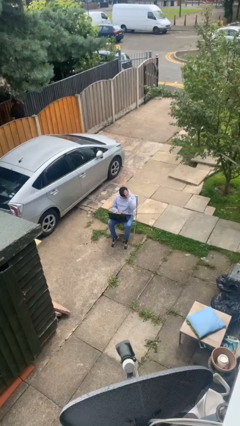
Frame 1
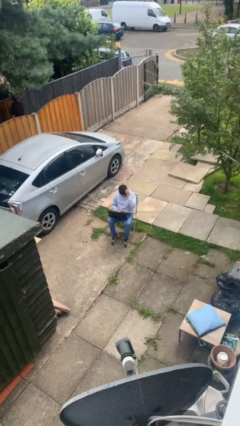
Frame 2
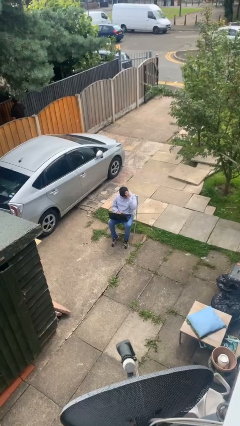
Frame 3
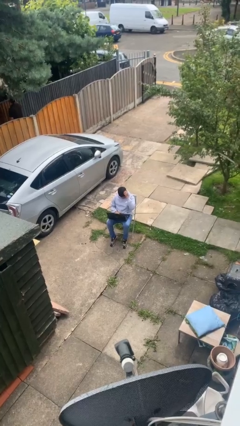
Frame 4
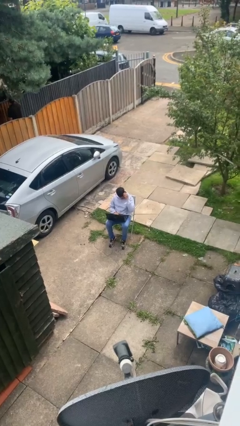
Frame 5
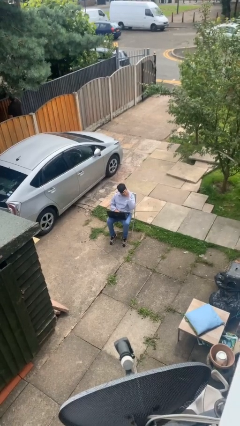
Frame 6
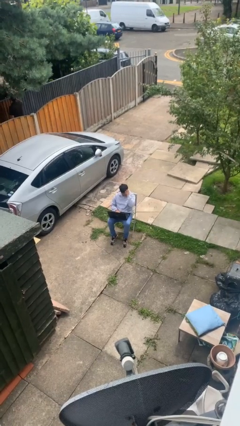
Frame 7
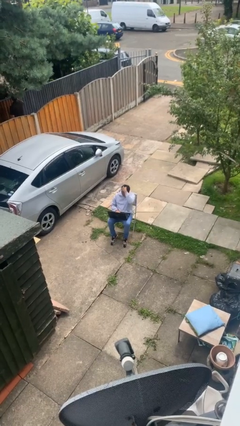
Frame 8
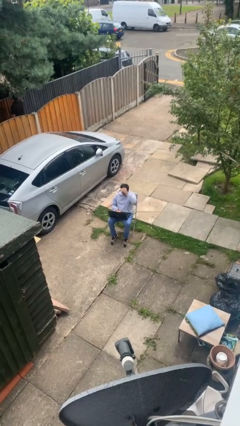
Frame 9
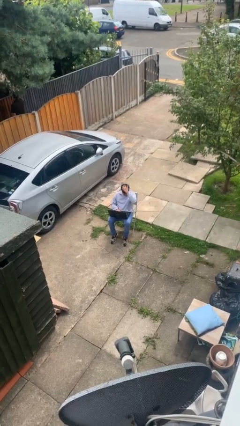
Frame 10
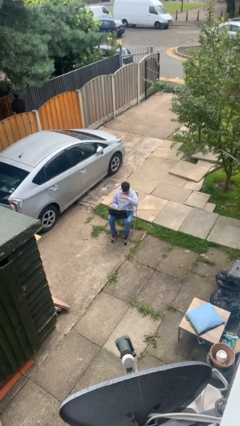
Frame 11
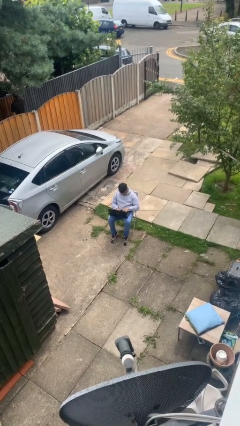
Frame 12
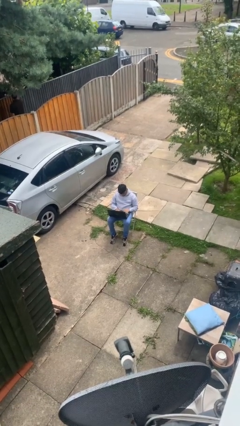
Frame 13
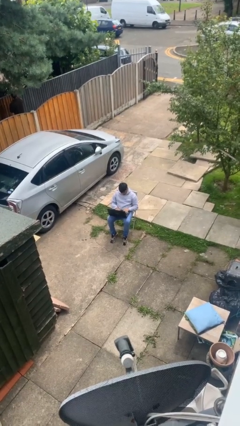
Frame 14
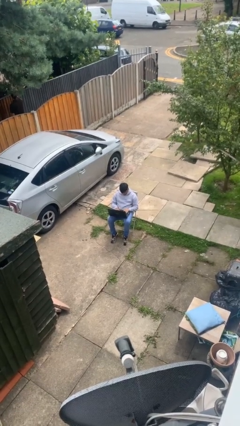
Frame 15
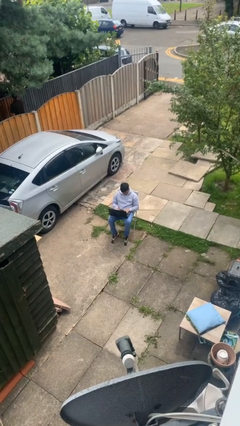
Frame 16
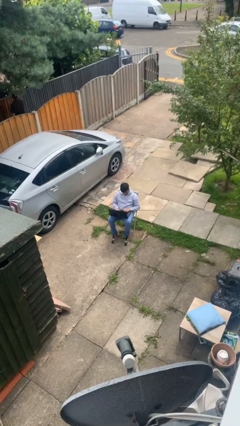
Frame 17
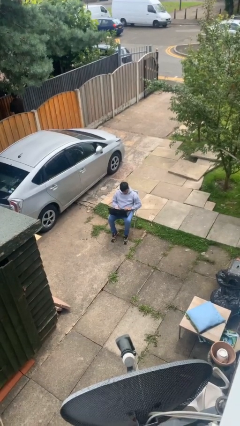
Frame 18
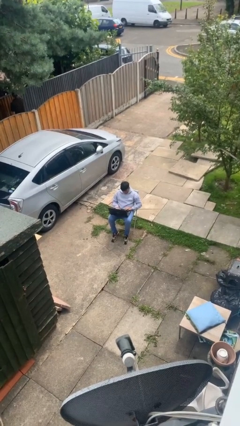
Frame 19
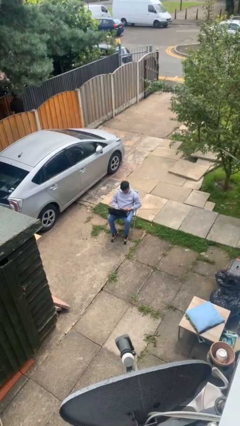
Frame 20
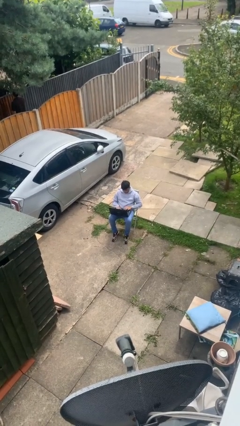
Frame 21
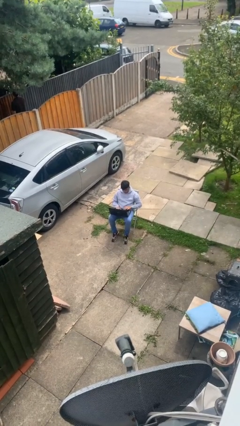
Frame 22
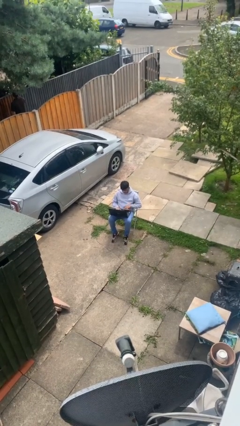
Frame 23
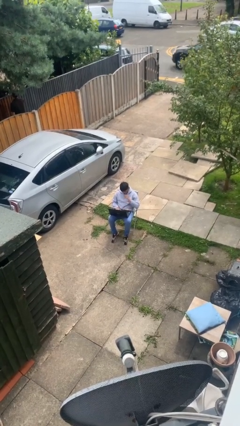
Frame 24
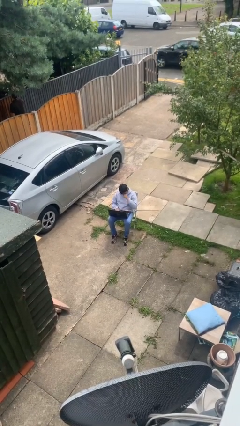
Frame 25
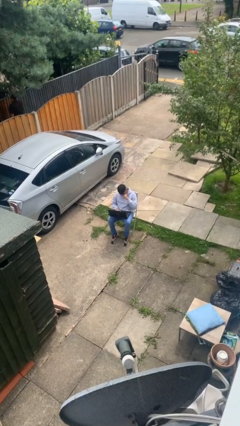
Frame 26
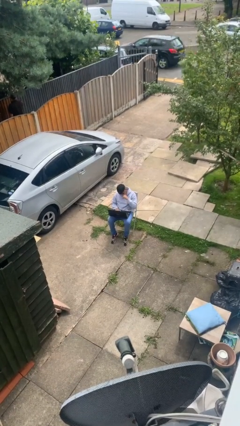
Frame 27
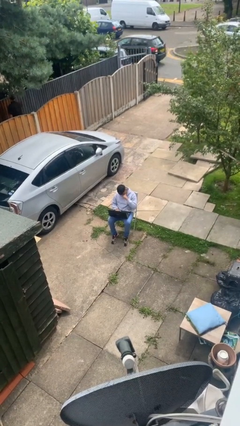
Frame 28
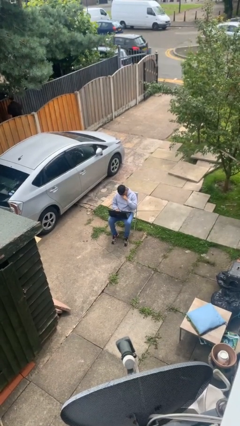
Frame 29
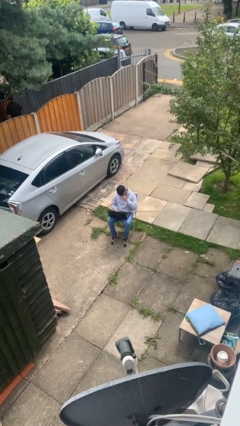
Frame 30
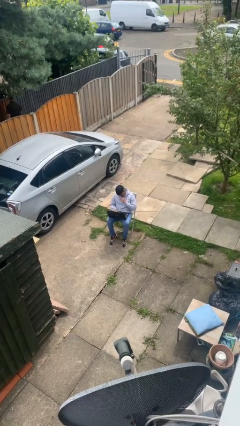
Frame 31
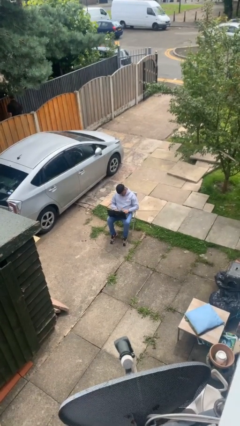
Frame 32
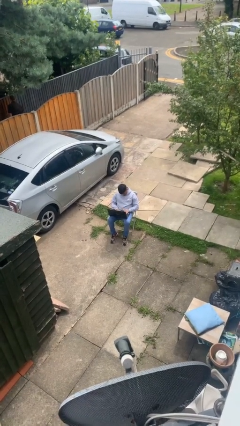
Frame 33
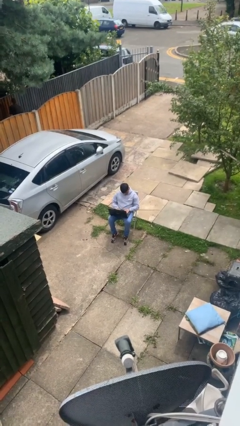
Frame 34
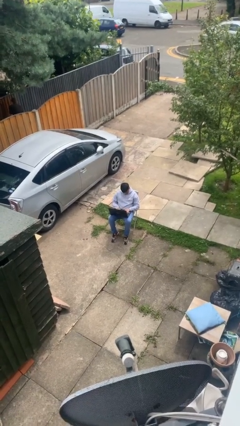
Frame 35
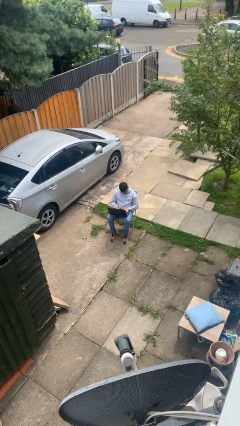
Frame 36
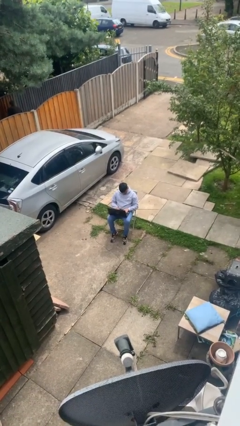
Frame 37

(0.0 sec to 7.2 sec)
person interacts with laptop

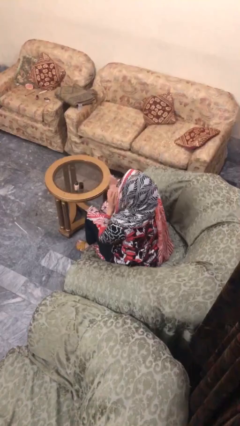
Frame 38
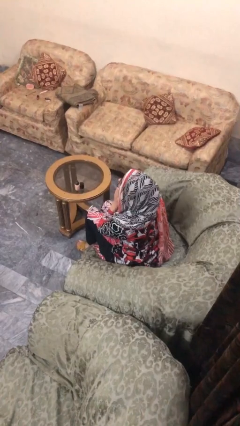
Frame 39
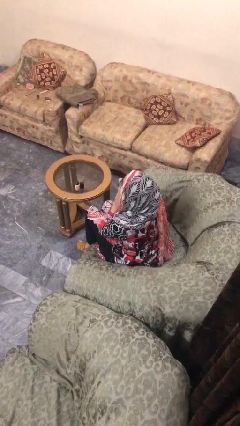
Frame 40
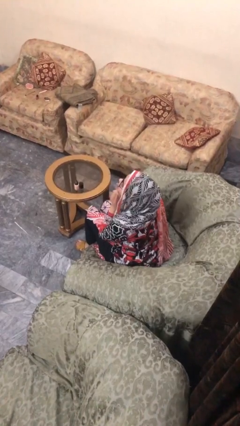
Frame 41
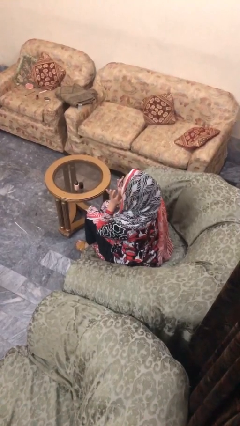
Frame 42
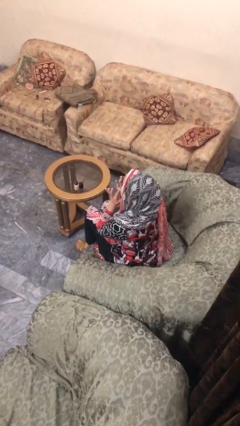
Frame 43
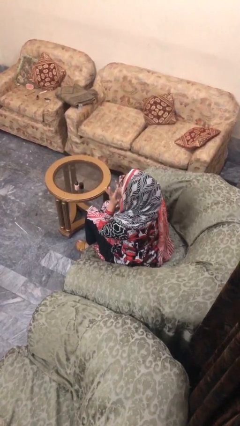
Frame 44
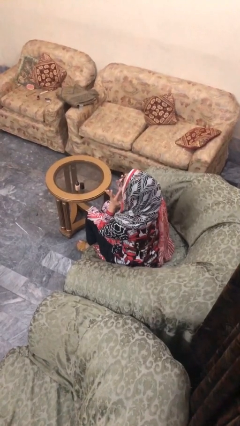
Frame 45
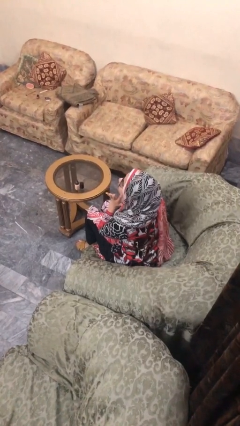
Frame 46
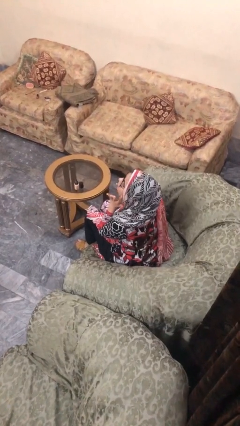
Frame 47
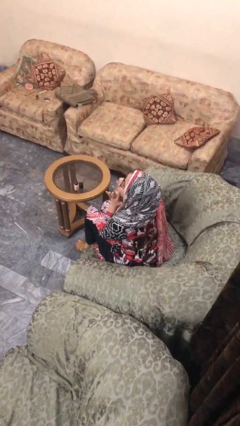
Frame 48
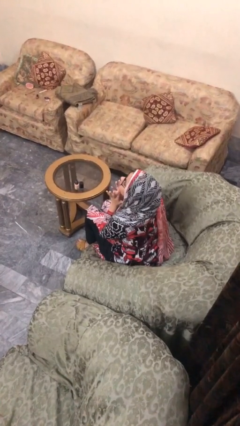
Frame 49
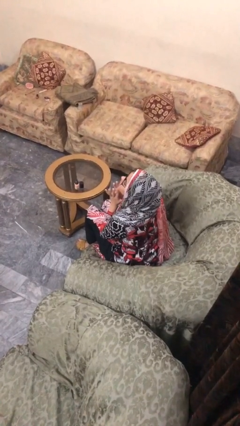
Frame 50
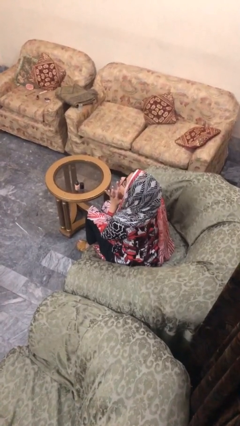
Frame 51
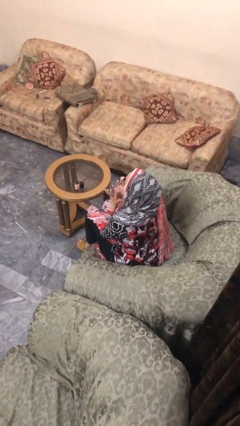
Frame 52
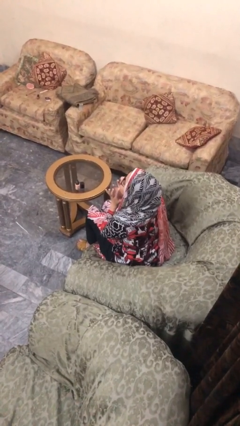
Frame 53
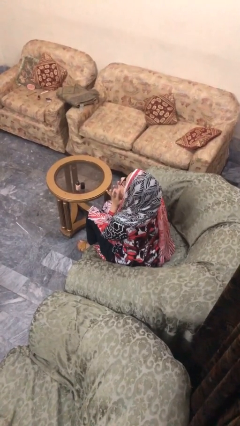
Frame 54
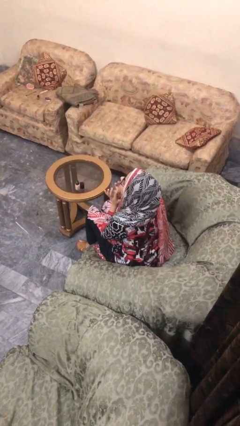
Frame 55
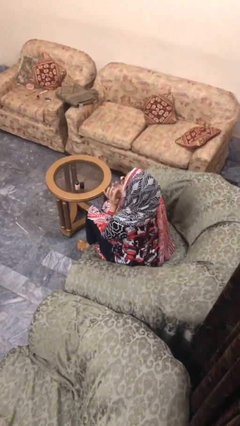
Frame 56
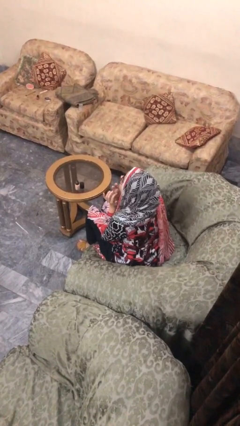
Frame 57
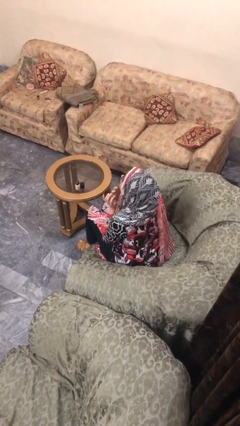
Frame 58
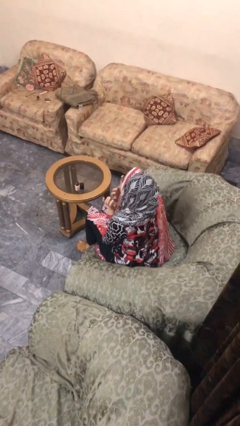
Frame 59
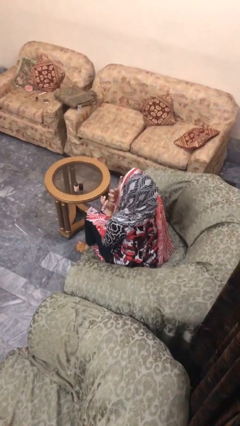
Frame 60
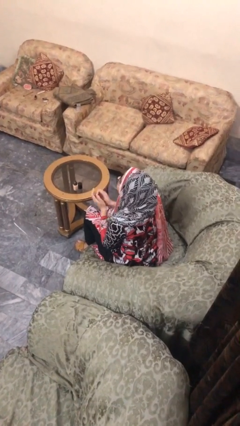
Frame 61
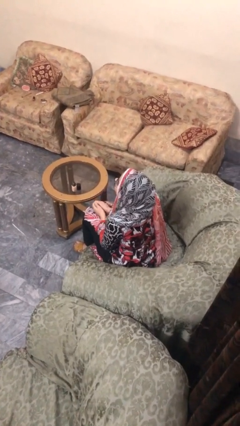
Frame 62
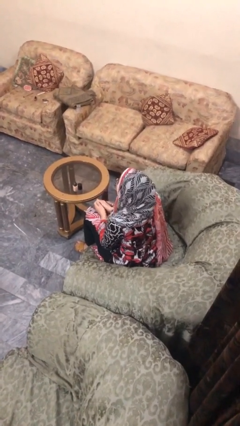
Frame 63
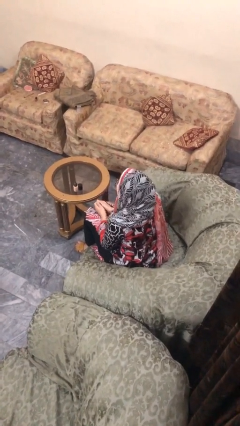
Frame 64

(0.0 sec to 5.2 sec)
person applies foundation makeup

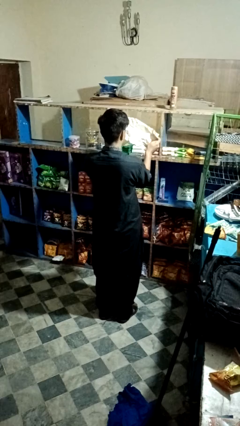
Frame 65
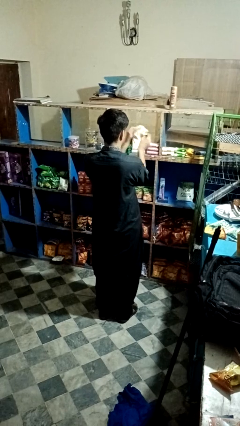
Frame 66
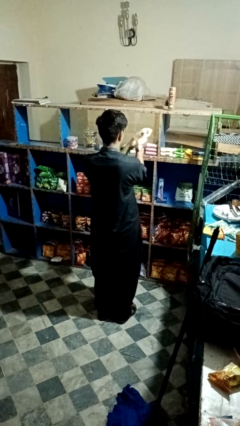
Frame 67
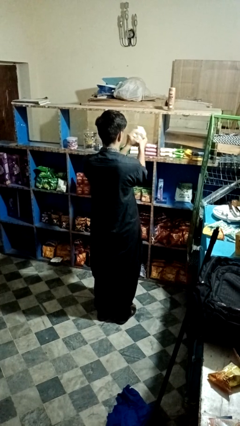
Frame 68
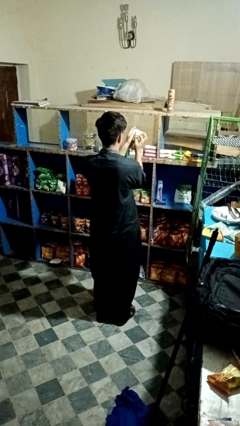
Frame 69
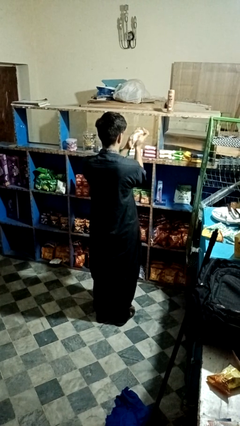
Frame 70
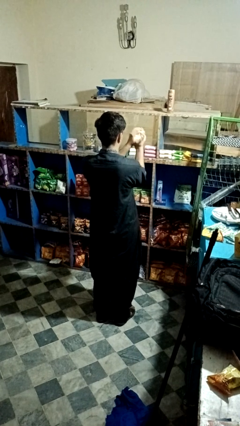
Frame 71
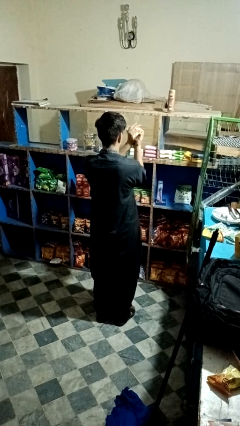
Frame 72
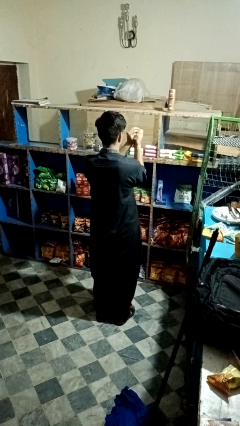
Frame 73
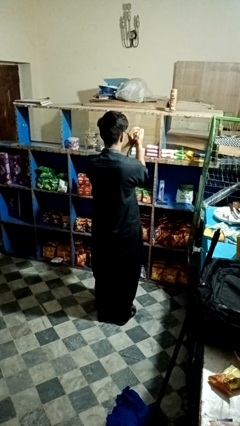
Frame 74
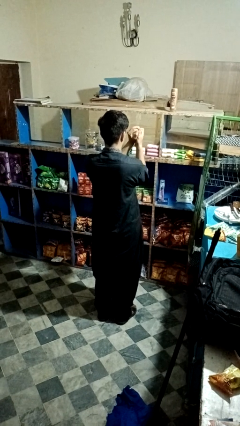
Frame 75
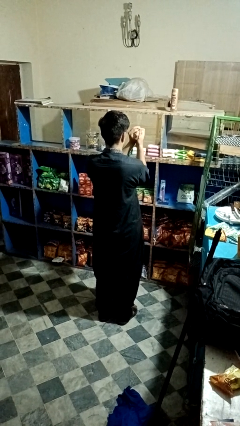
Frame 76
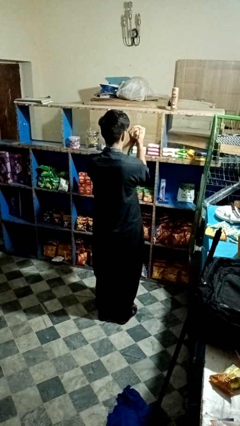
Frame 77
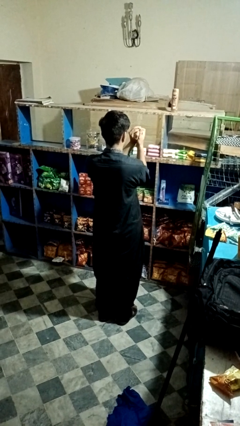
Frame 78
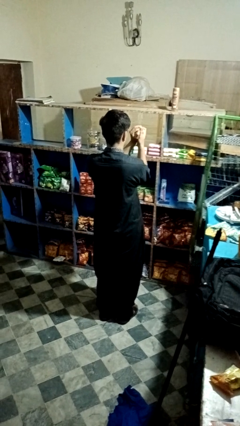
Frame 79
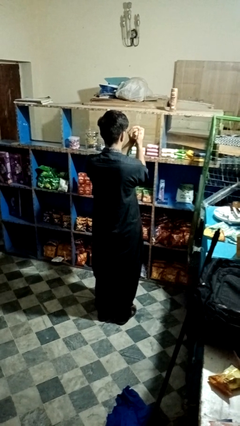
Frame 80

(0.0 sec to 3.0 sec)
person crumples paper

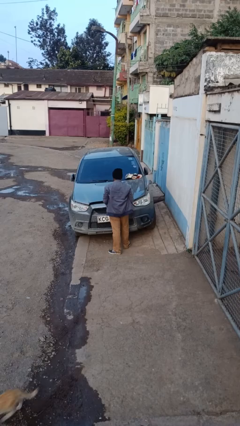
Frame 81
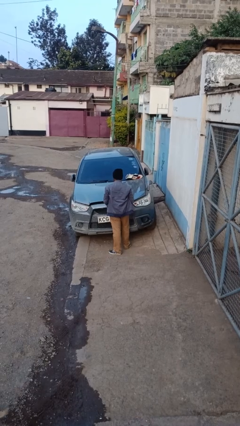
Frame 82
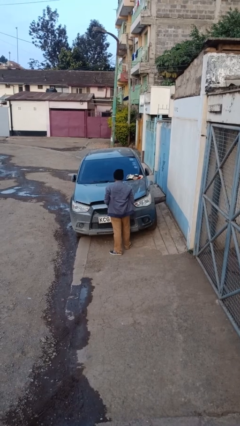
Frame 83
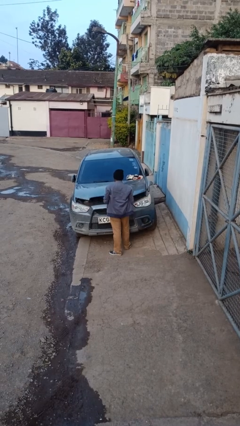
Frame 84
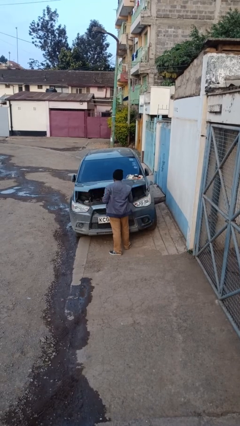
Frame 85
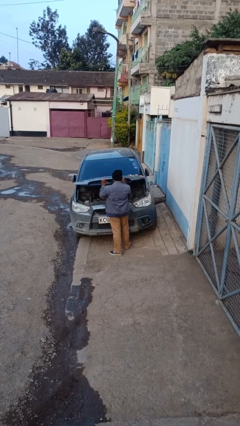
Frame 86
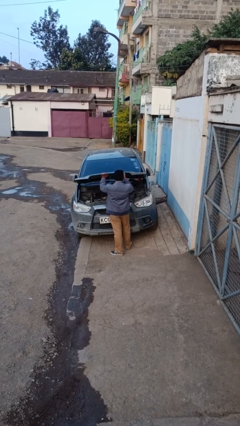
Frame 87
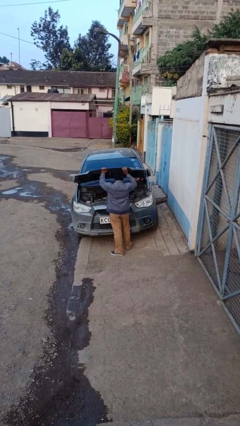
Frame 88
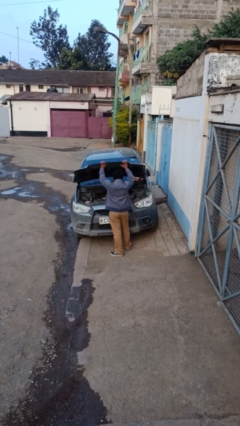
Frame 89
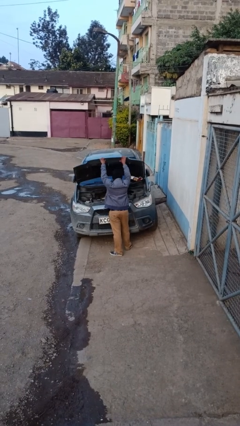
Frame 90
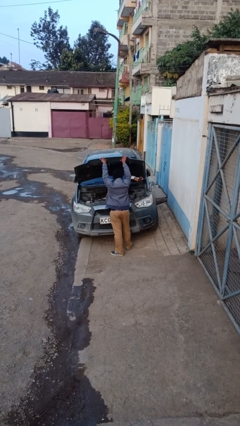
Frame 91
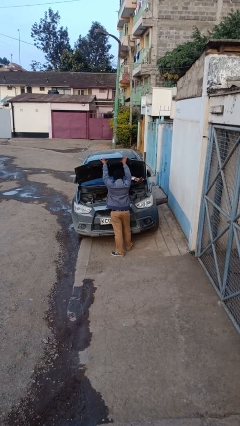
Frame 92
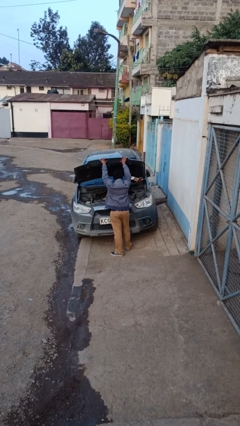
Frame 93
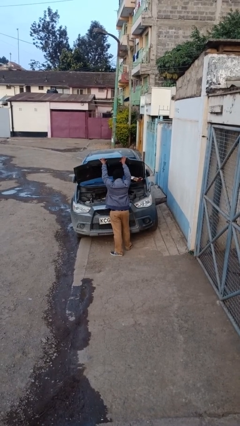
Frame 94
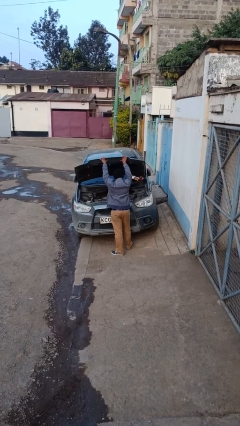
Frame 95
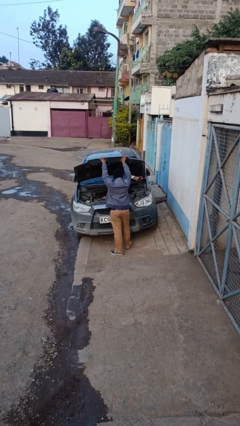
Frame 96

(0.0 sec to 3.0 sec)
person opens car hood
